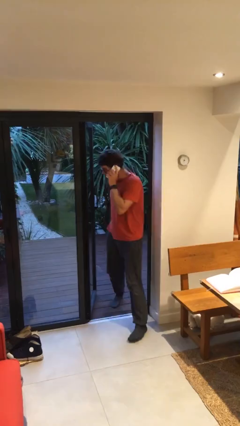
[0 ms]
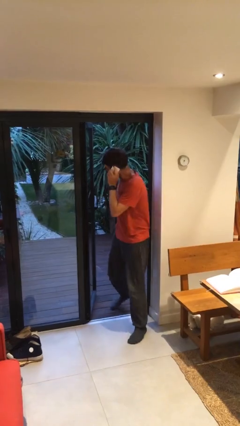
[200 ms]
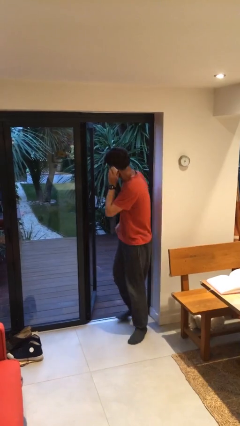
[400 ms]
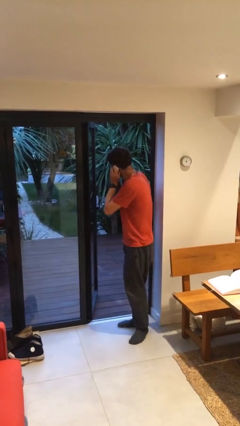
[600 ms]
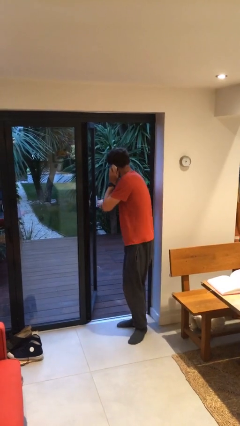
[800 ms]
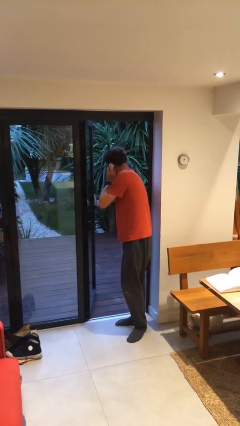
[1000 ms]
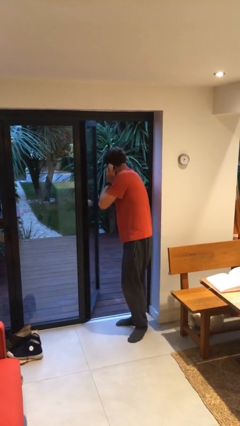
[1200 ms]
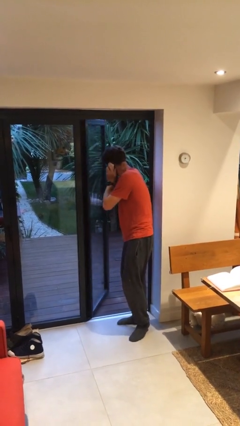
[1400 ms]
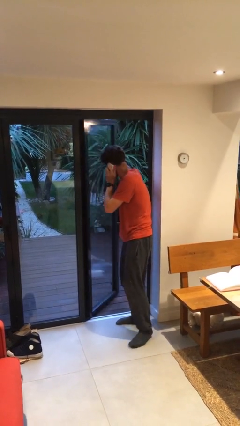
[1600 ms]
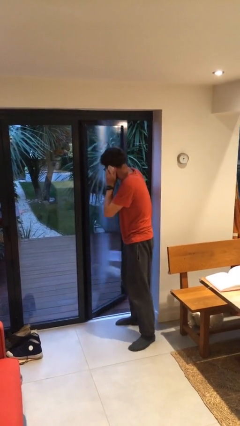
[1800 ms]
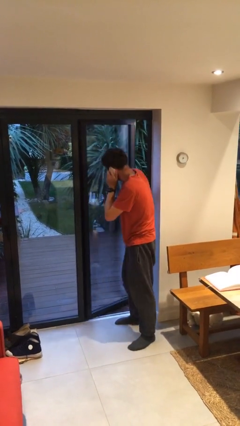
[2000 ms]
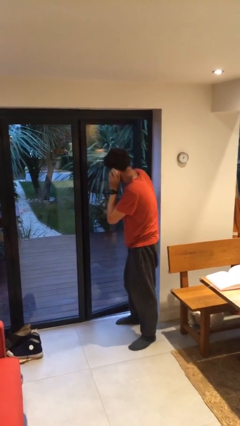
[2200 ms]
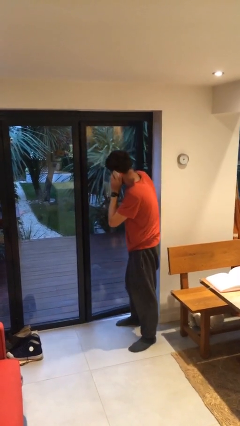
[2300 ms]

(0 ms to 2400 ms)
person enters scene through structure

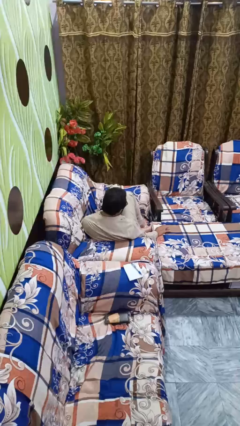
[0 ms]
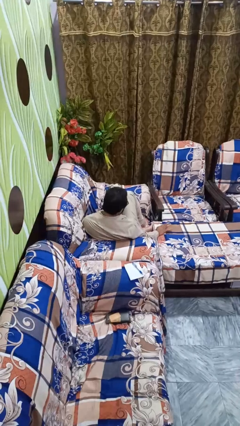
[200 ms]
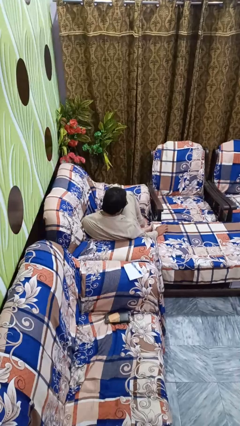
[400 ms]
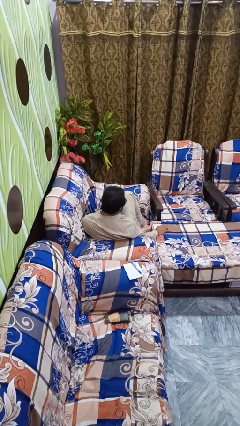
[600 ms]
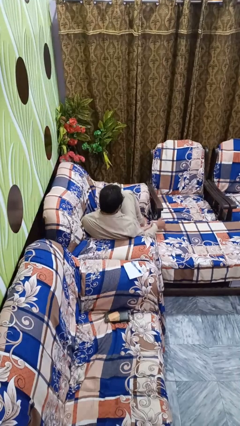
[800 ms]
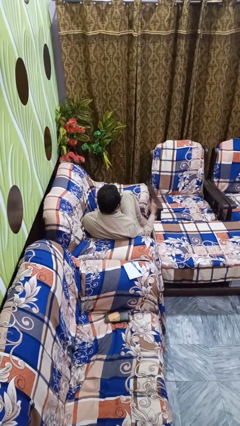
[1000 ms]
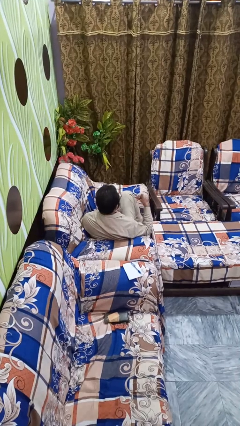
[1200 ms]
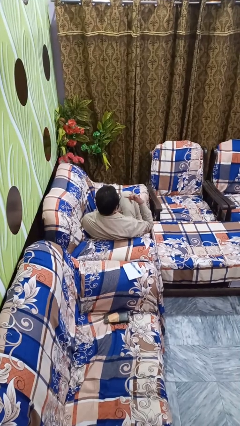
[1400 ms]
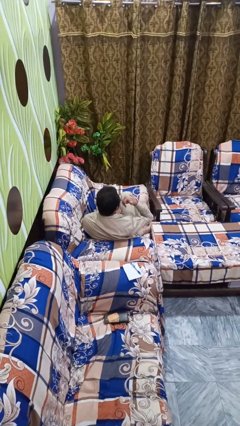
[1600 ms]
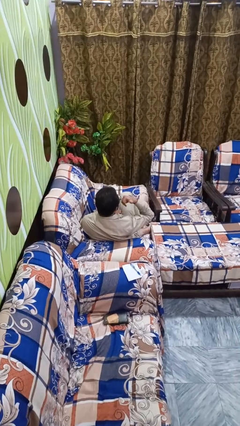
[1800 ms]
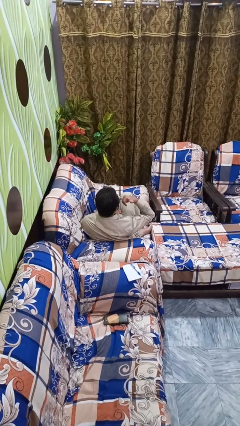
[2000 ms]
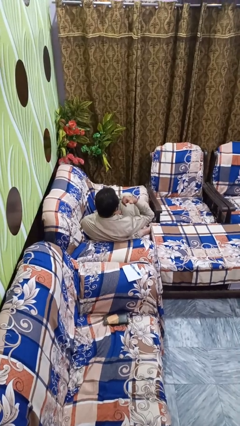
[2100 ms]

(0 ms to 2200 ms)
person gestures call me

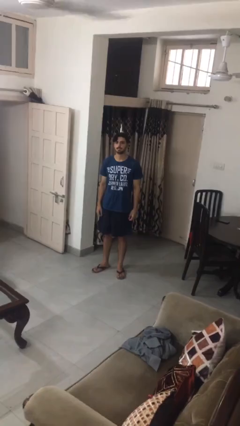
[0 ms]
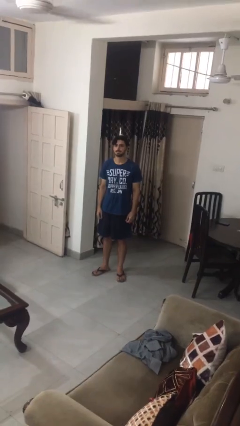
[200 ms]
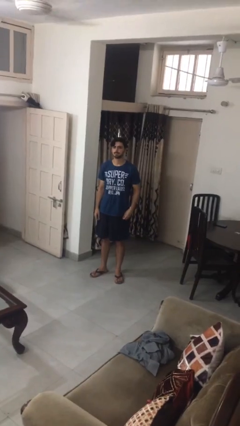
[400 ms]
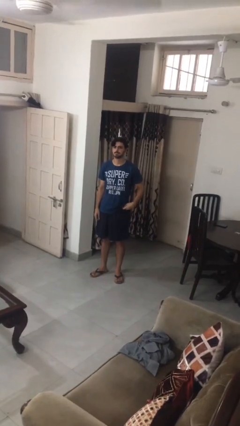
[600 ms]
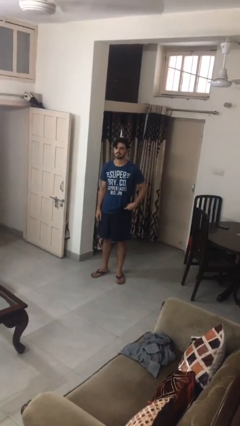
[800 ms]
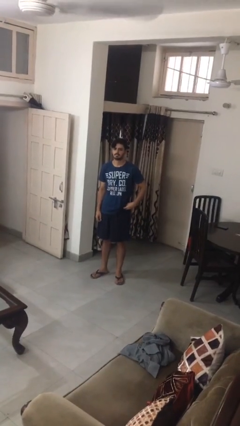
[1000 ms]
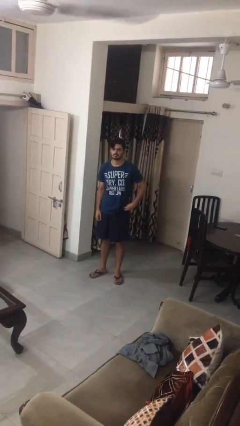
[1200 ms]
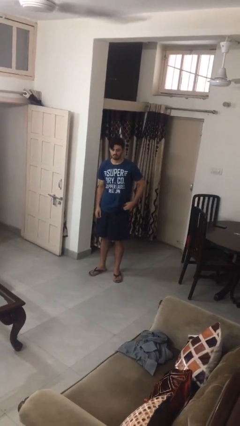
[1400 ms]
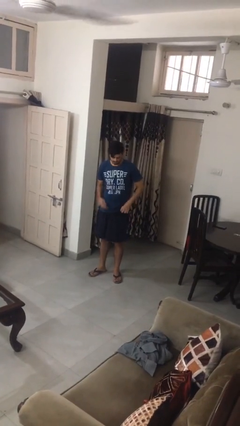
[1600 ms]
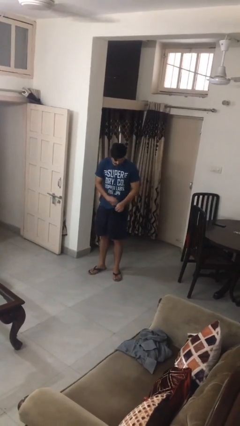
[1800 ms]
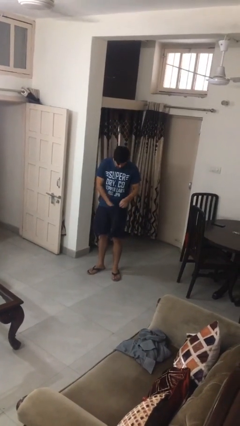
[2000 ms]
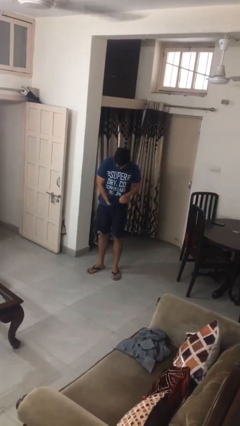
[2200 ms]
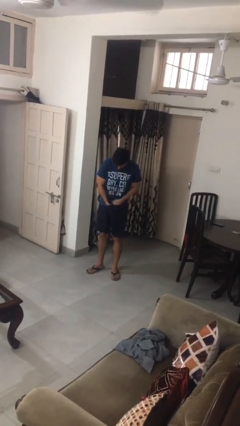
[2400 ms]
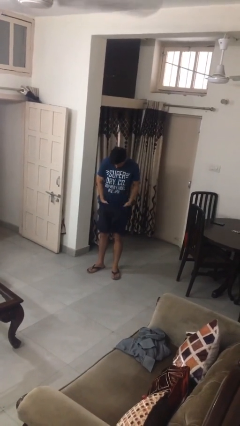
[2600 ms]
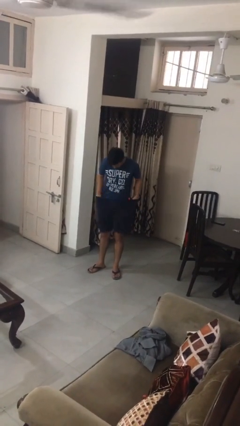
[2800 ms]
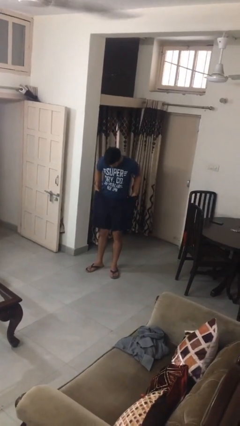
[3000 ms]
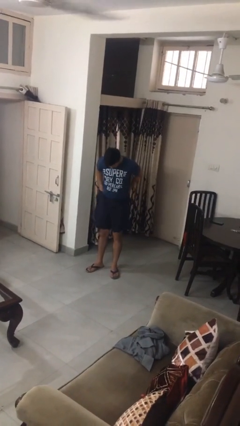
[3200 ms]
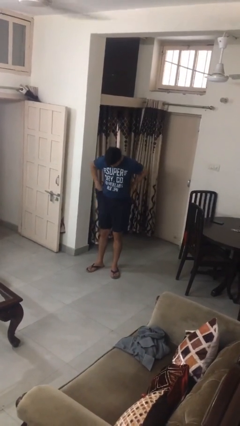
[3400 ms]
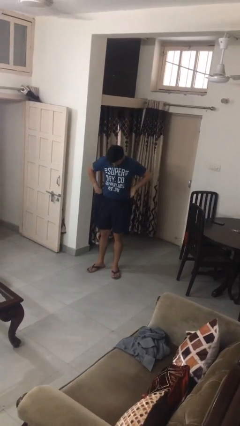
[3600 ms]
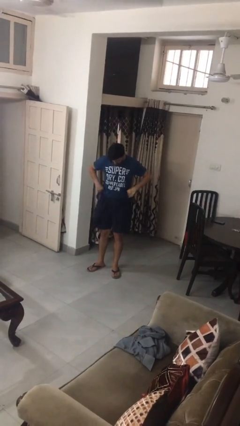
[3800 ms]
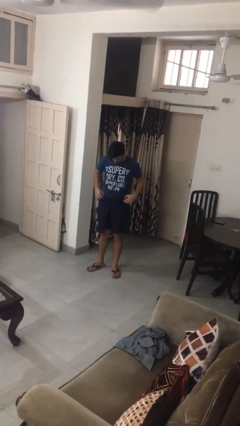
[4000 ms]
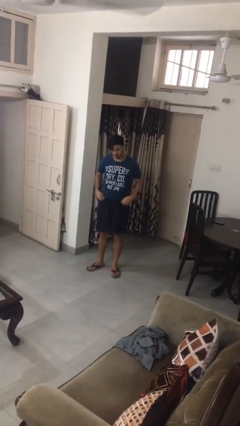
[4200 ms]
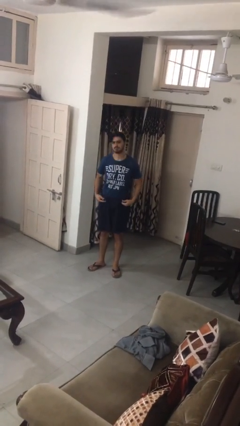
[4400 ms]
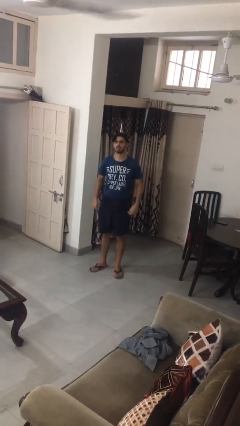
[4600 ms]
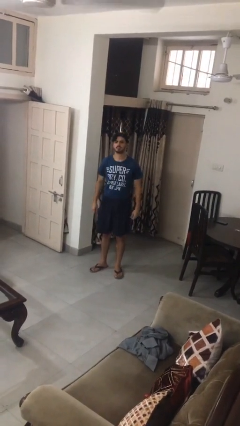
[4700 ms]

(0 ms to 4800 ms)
person tucks in shirt

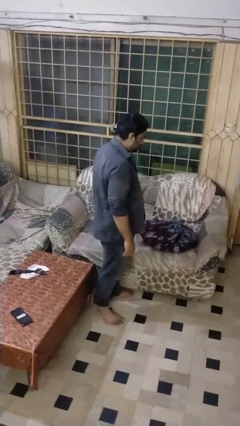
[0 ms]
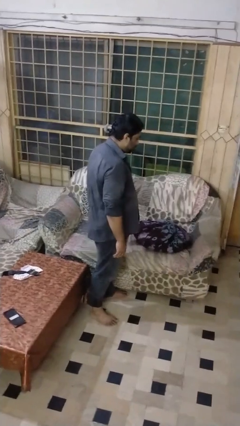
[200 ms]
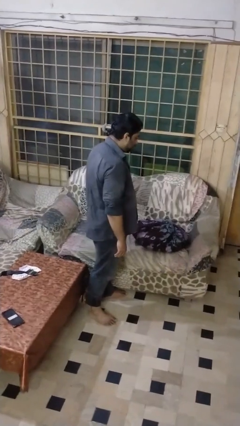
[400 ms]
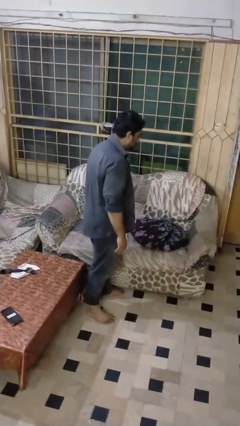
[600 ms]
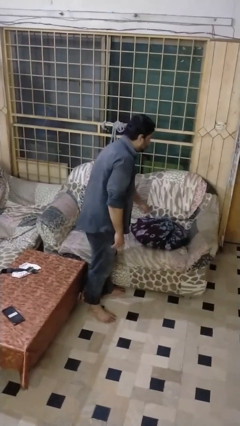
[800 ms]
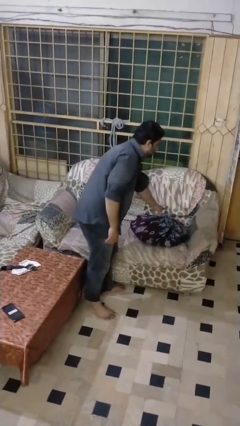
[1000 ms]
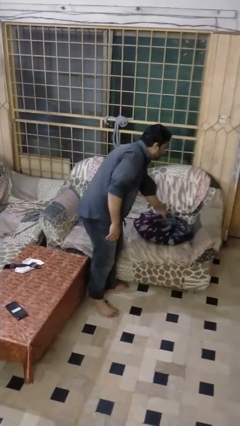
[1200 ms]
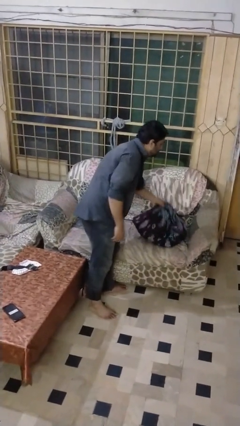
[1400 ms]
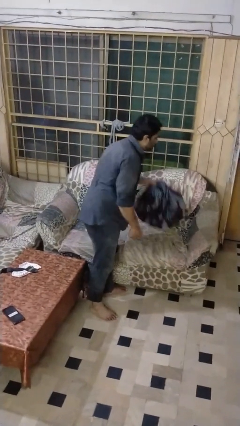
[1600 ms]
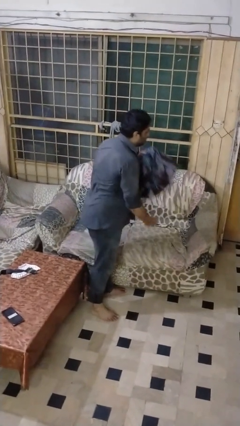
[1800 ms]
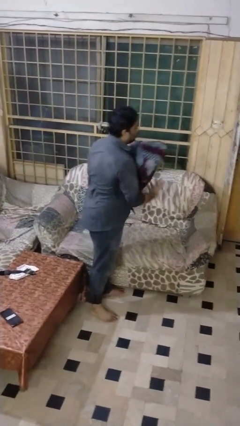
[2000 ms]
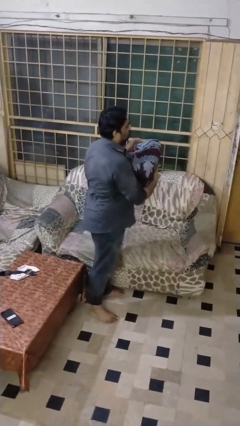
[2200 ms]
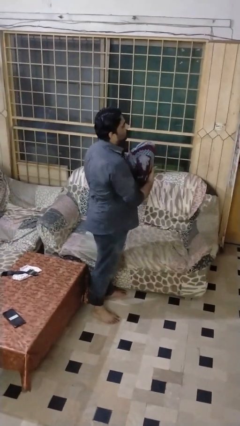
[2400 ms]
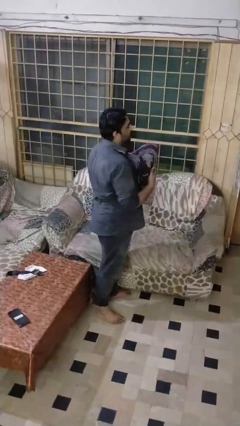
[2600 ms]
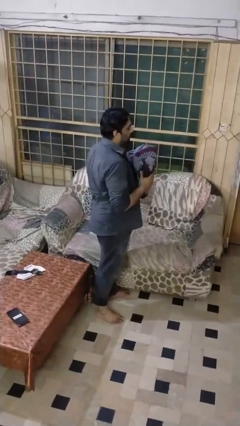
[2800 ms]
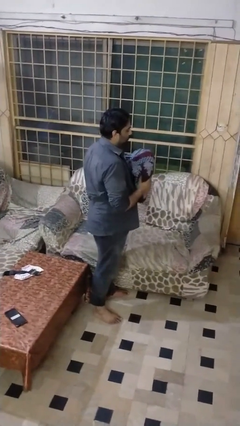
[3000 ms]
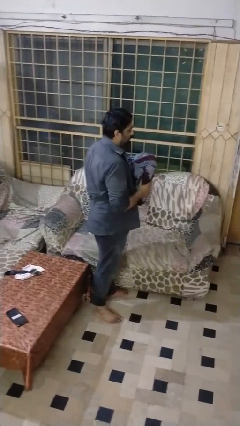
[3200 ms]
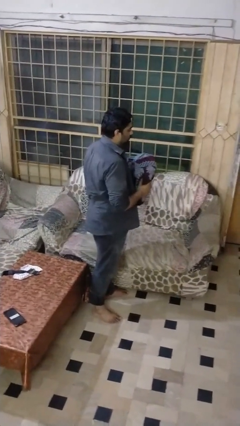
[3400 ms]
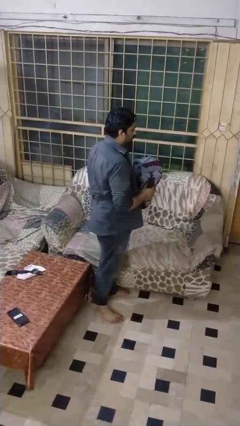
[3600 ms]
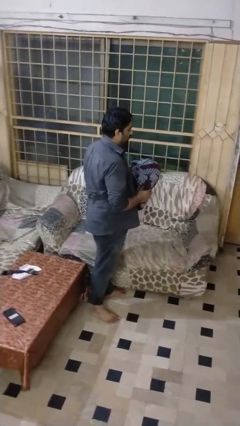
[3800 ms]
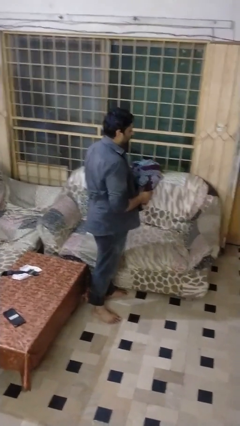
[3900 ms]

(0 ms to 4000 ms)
person picks up object from couch

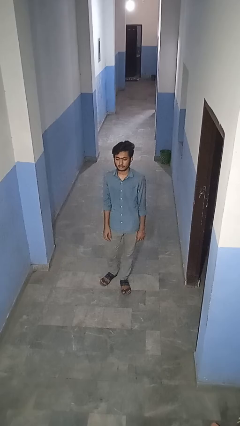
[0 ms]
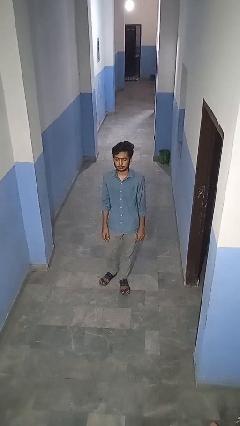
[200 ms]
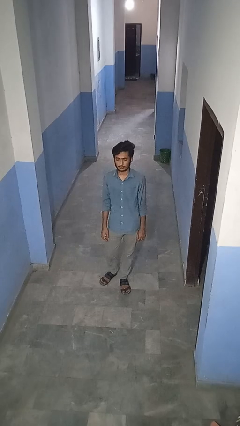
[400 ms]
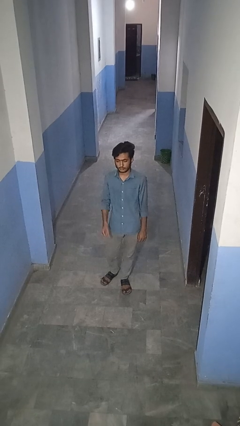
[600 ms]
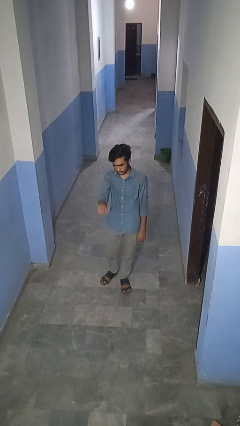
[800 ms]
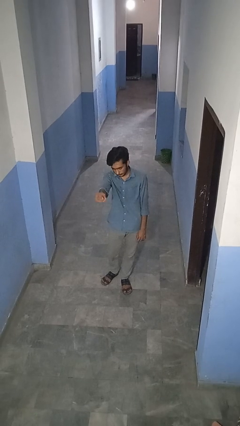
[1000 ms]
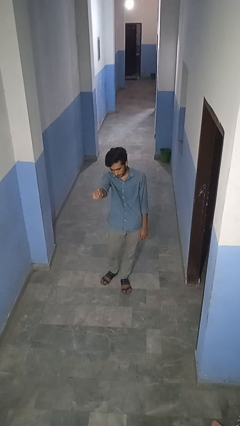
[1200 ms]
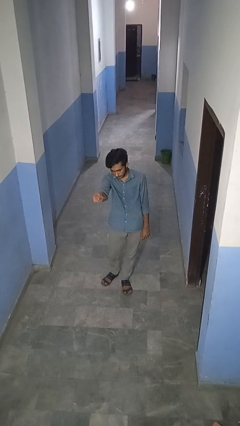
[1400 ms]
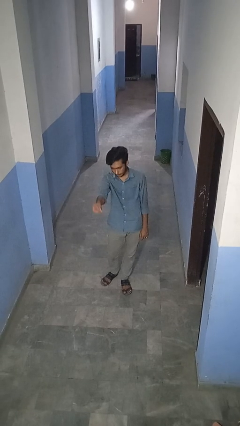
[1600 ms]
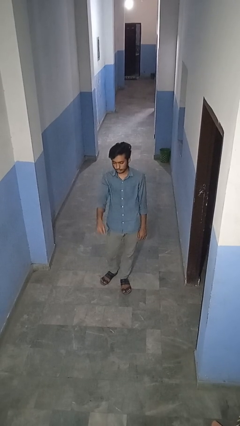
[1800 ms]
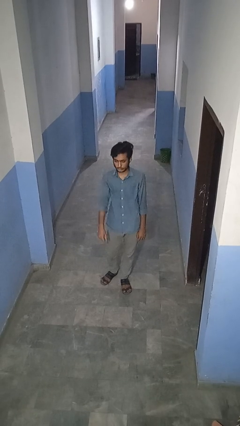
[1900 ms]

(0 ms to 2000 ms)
person snaps fingers

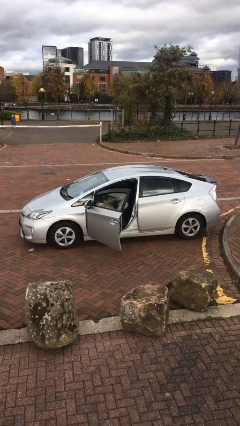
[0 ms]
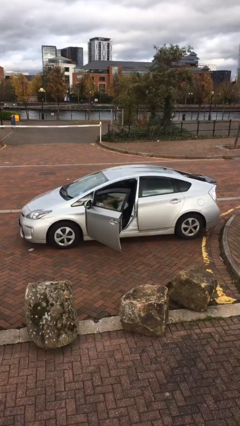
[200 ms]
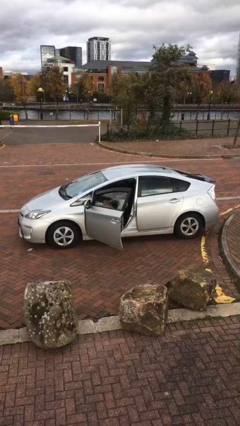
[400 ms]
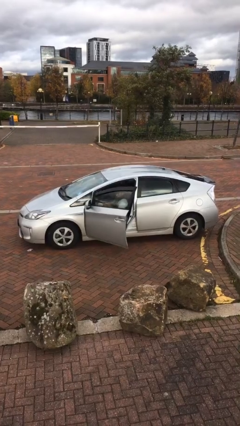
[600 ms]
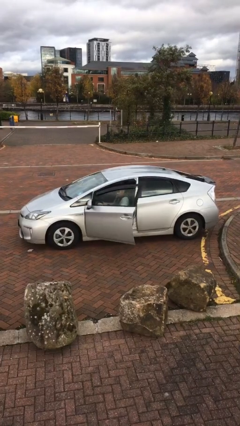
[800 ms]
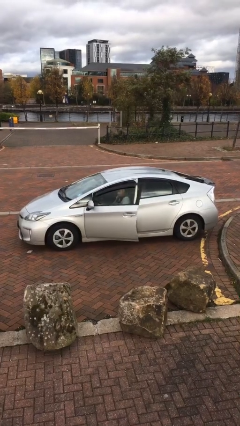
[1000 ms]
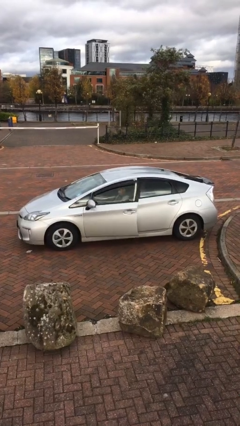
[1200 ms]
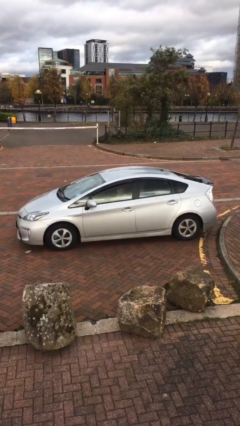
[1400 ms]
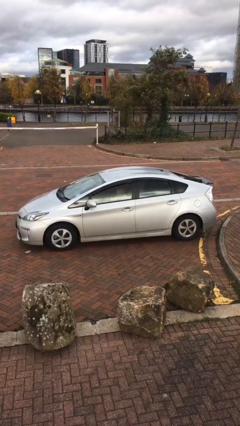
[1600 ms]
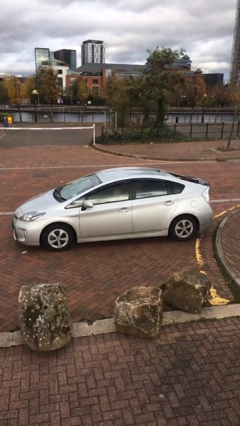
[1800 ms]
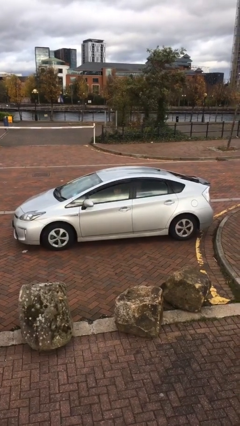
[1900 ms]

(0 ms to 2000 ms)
person closes car door
